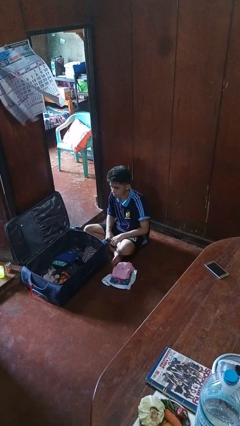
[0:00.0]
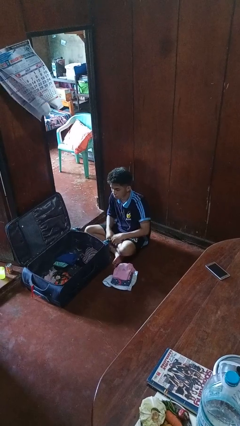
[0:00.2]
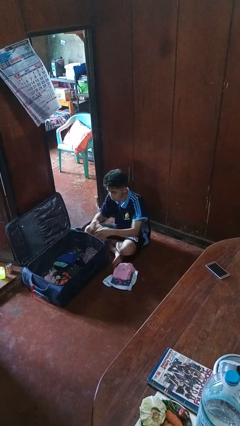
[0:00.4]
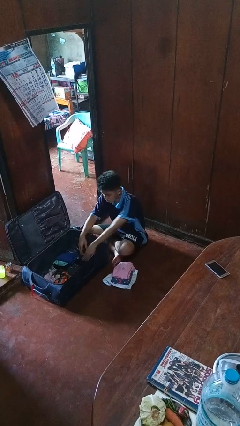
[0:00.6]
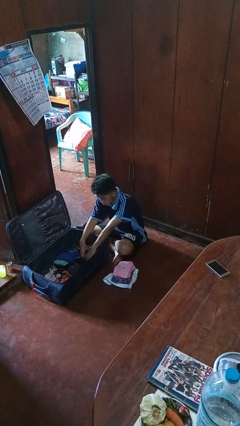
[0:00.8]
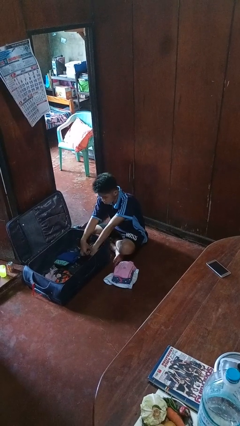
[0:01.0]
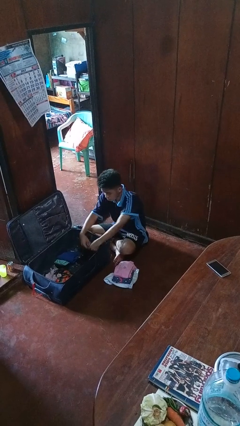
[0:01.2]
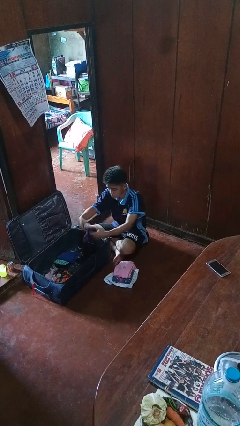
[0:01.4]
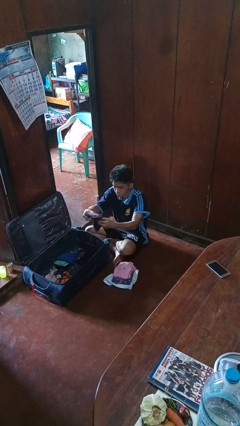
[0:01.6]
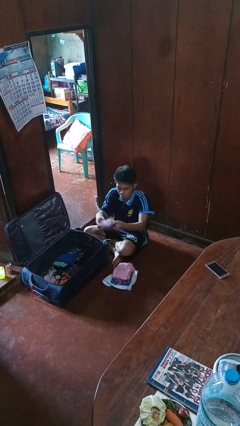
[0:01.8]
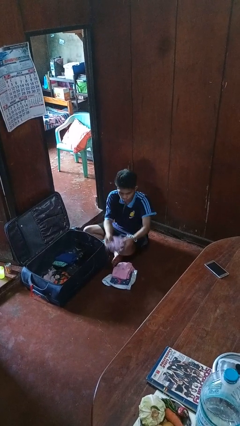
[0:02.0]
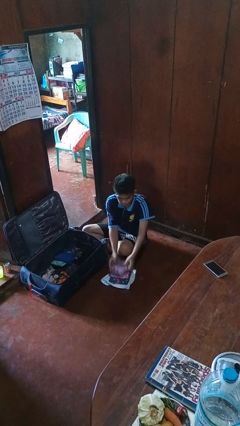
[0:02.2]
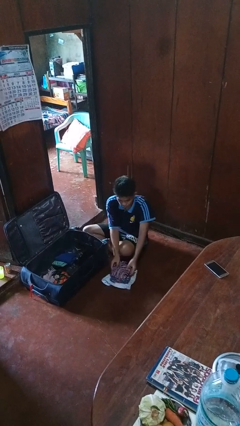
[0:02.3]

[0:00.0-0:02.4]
person unloads clothes from suitcase

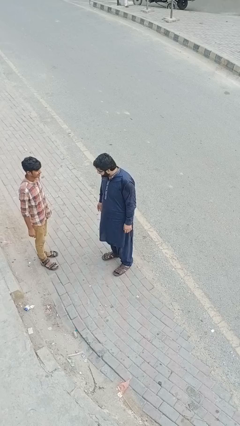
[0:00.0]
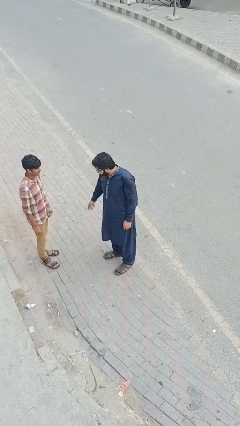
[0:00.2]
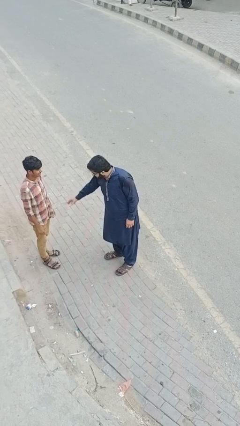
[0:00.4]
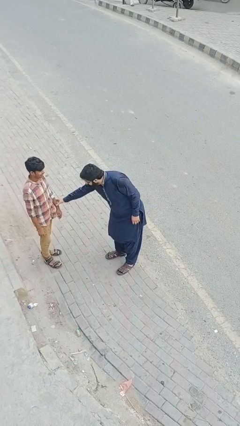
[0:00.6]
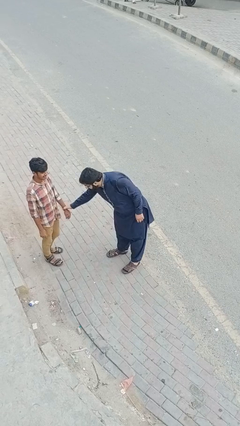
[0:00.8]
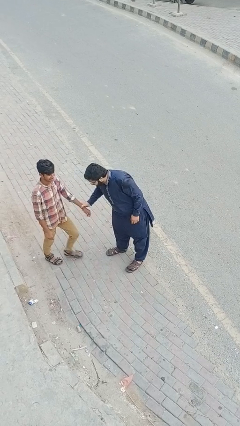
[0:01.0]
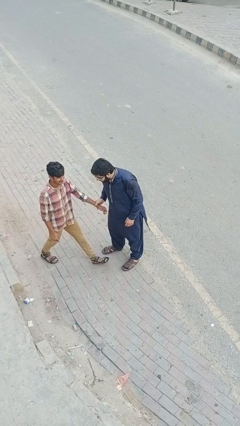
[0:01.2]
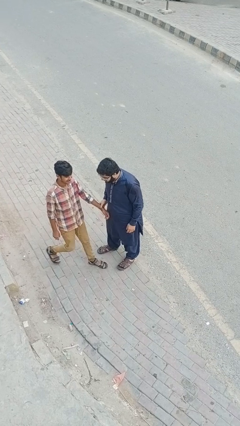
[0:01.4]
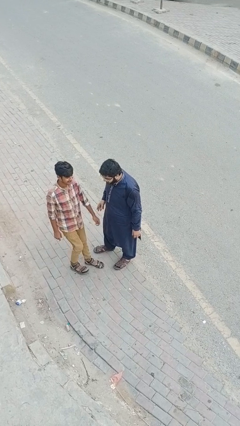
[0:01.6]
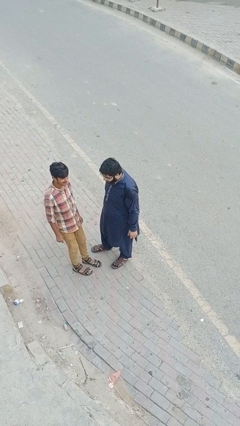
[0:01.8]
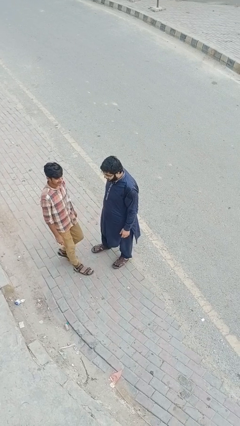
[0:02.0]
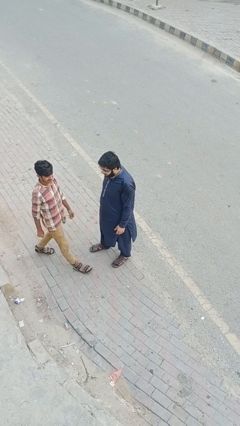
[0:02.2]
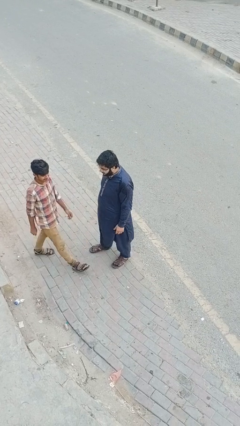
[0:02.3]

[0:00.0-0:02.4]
person grabs person by forearm

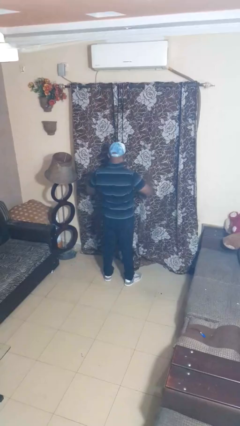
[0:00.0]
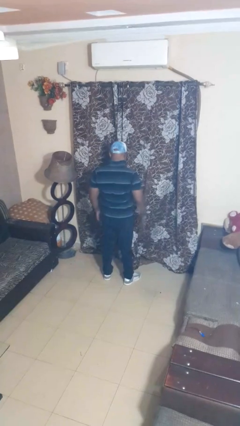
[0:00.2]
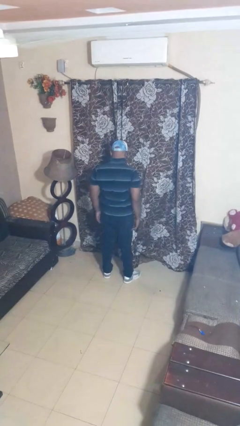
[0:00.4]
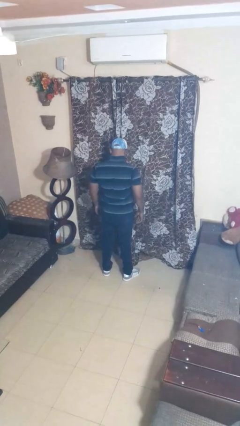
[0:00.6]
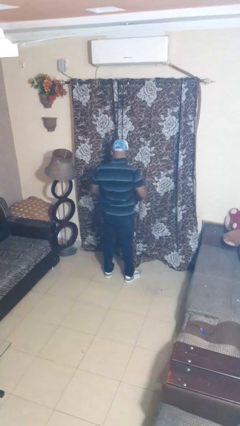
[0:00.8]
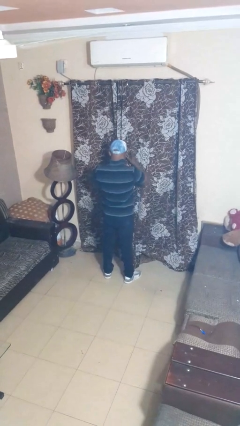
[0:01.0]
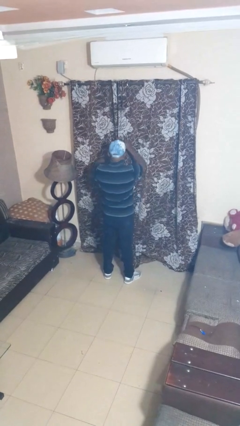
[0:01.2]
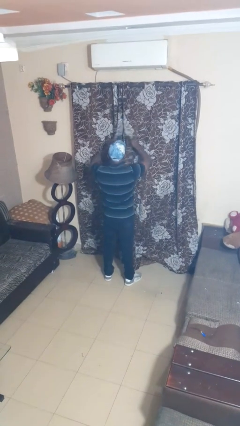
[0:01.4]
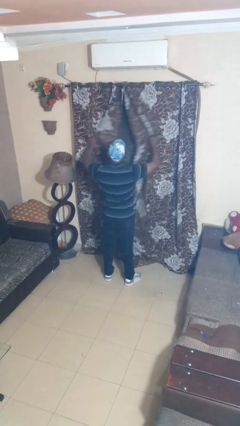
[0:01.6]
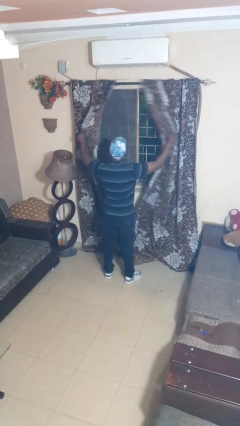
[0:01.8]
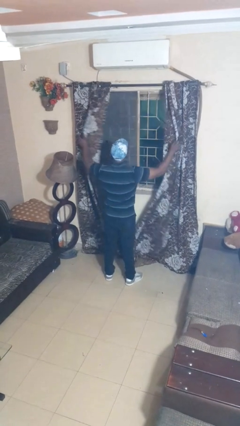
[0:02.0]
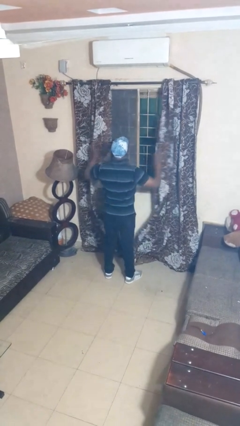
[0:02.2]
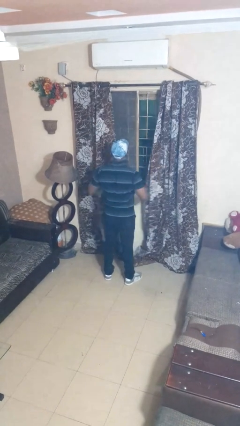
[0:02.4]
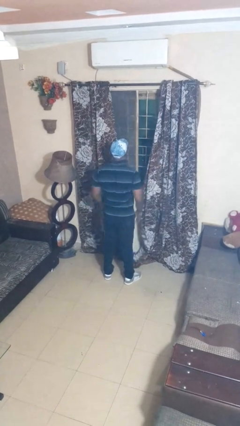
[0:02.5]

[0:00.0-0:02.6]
person opens curtains

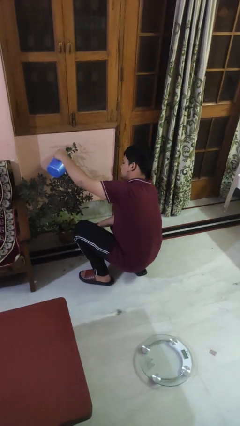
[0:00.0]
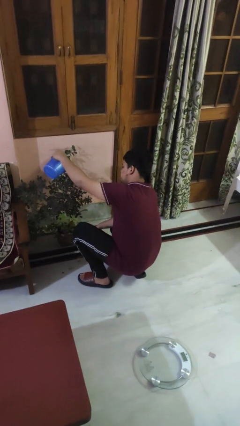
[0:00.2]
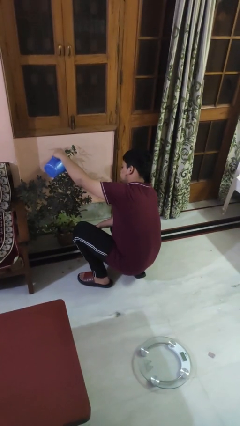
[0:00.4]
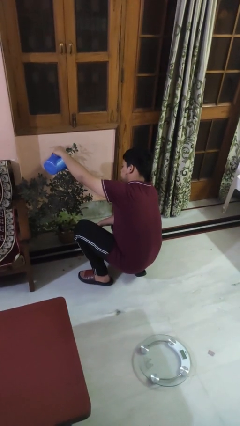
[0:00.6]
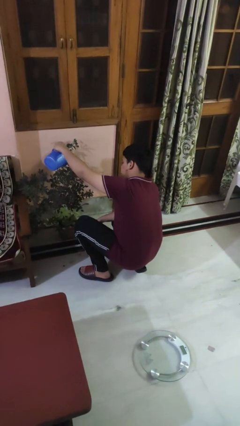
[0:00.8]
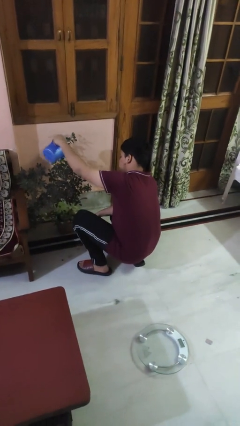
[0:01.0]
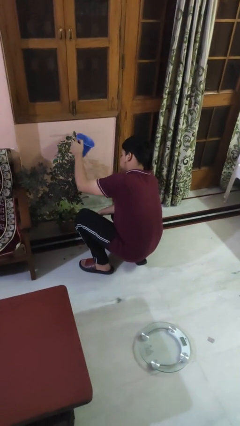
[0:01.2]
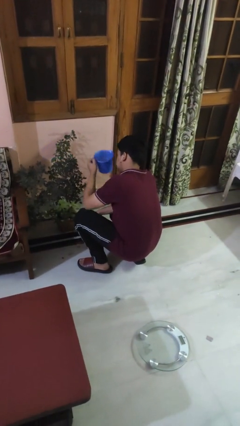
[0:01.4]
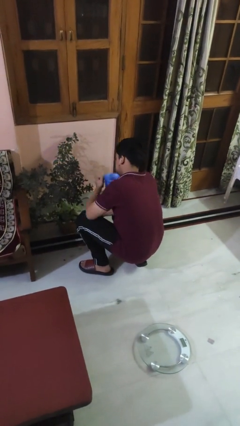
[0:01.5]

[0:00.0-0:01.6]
person waters houseplant

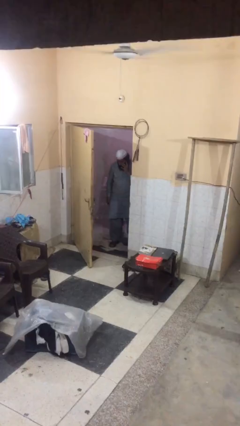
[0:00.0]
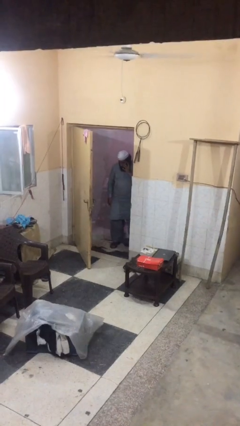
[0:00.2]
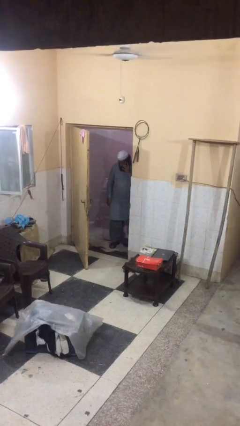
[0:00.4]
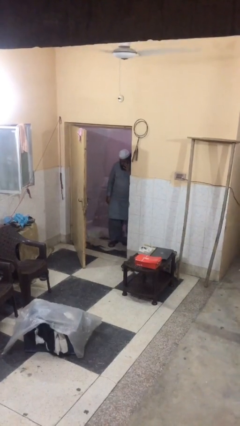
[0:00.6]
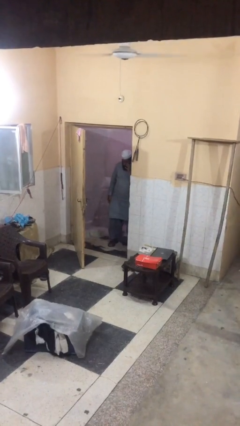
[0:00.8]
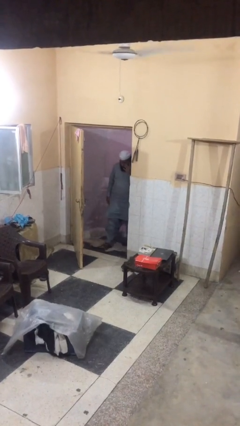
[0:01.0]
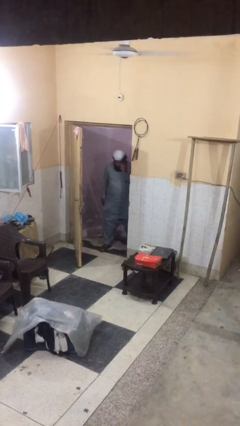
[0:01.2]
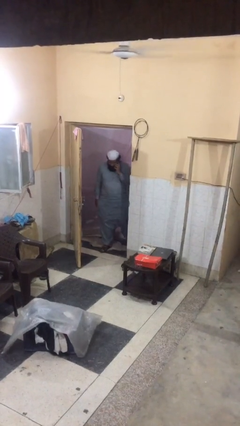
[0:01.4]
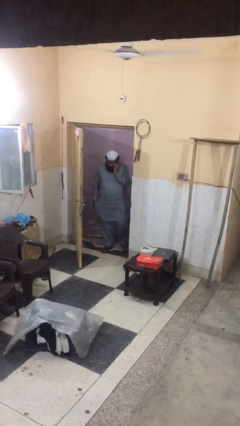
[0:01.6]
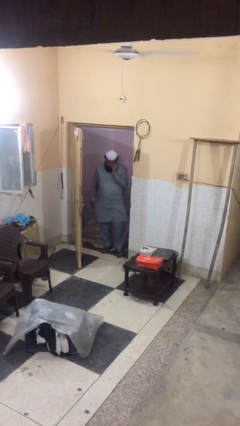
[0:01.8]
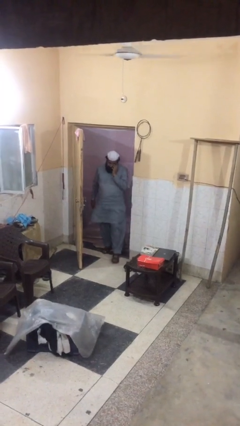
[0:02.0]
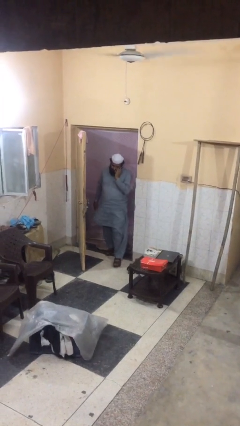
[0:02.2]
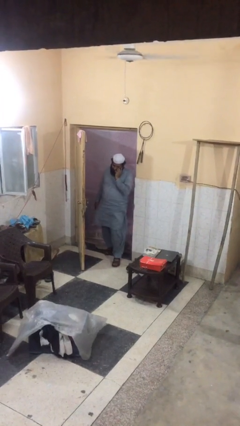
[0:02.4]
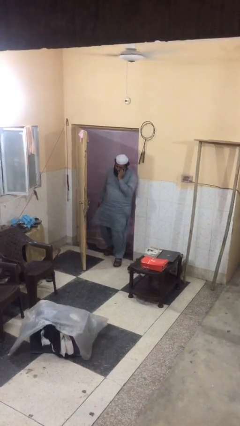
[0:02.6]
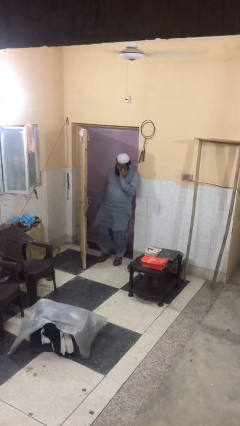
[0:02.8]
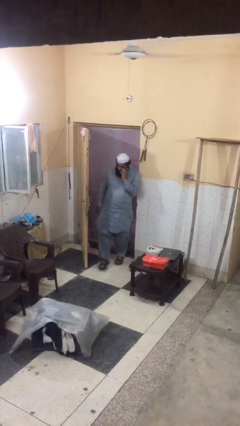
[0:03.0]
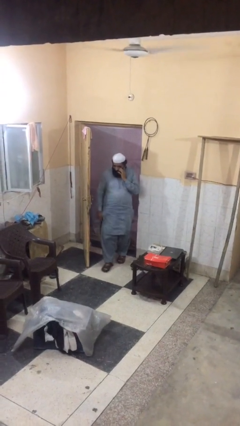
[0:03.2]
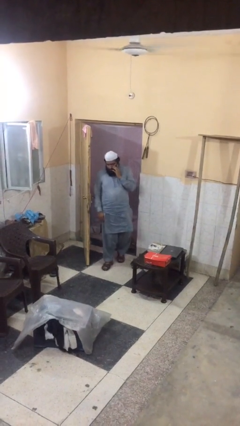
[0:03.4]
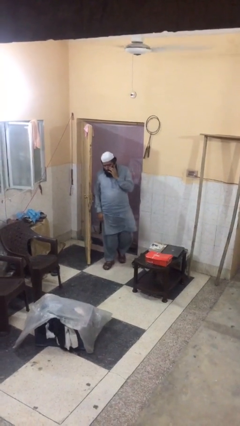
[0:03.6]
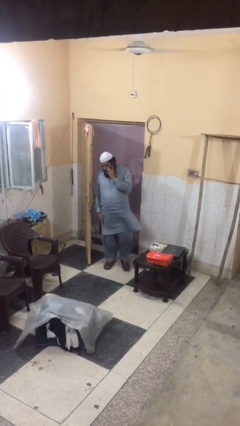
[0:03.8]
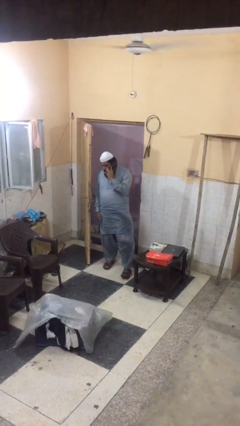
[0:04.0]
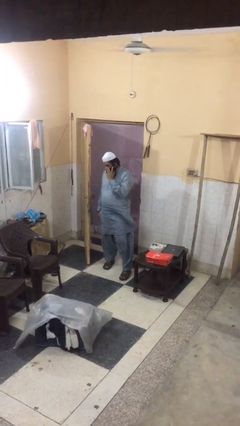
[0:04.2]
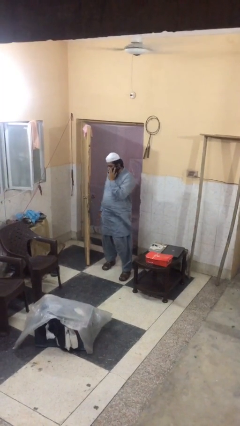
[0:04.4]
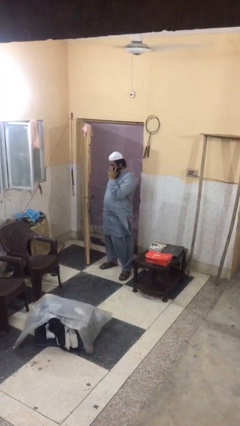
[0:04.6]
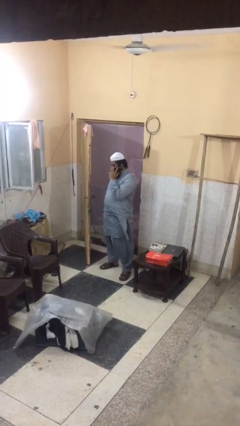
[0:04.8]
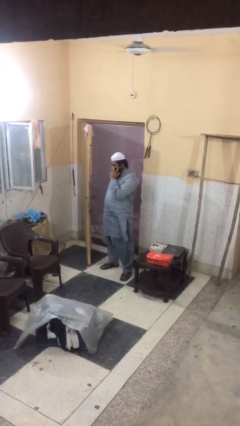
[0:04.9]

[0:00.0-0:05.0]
person enters scene through structure

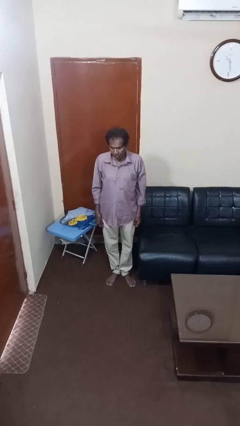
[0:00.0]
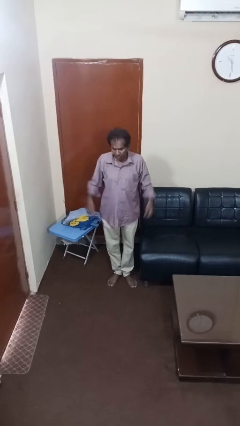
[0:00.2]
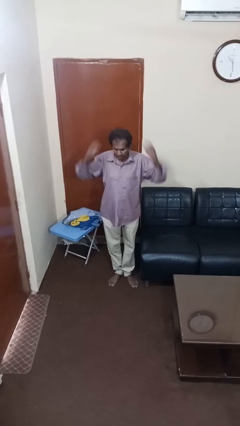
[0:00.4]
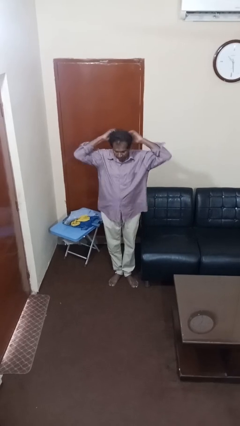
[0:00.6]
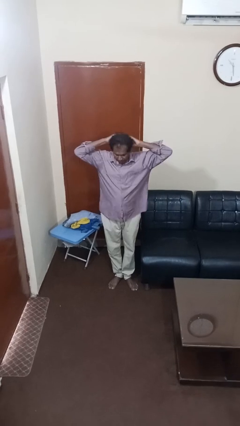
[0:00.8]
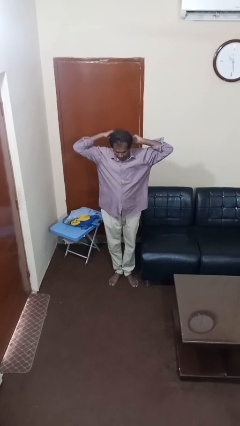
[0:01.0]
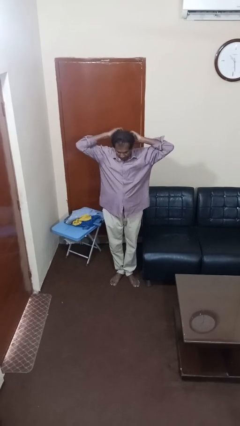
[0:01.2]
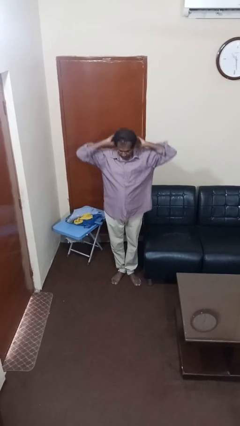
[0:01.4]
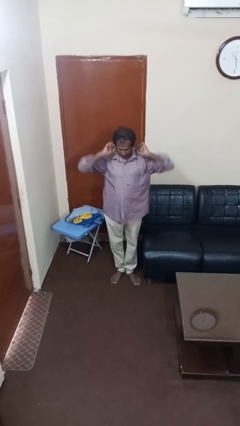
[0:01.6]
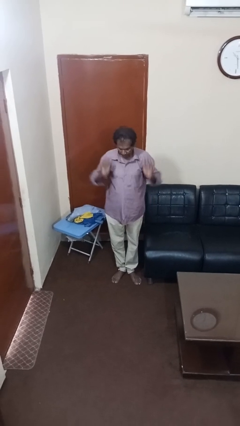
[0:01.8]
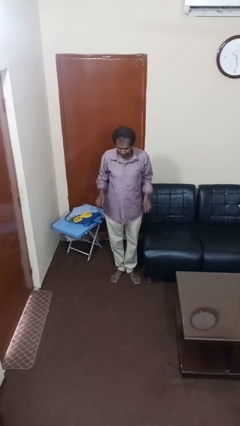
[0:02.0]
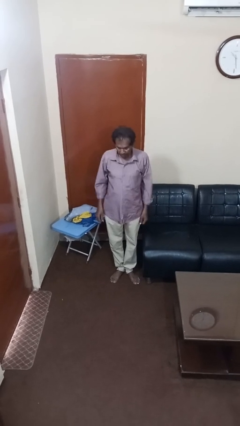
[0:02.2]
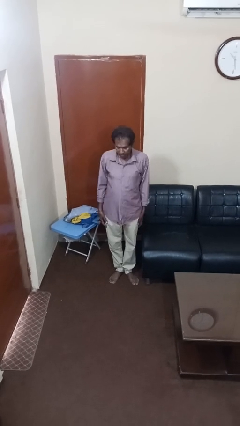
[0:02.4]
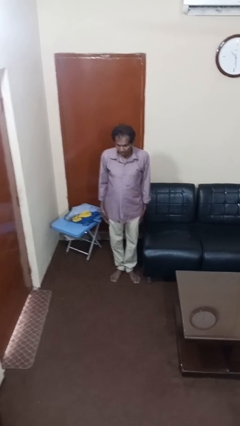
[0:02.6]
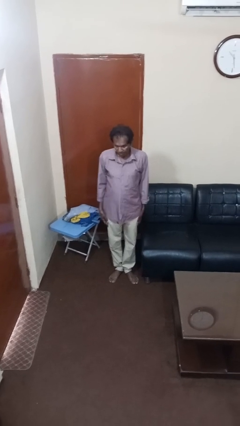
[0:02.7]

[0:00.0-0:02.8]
person takes off hairtie

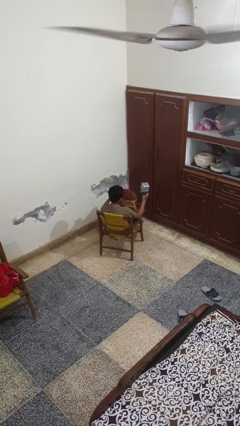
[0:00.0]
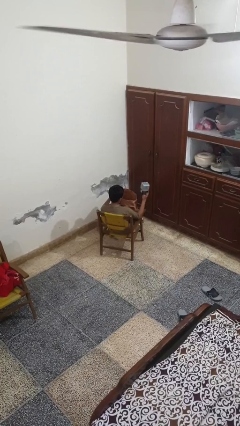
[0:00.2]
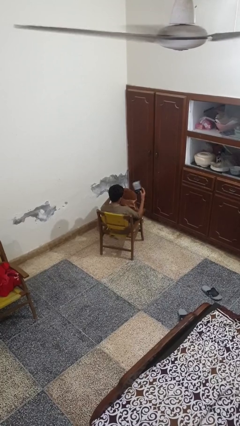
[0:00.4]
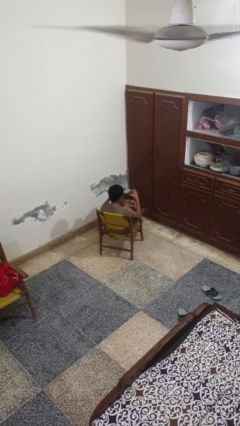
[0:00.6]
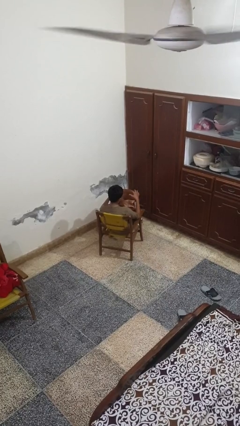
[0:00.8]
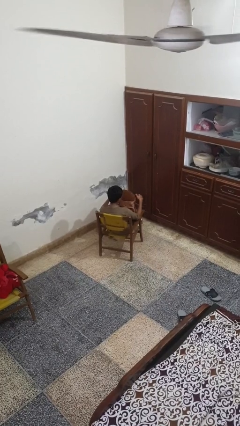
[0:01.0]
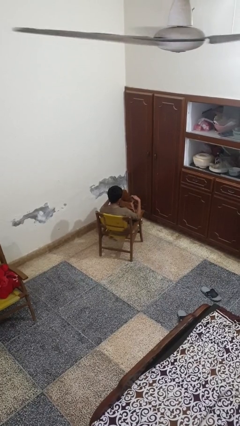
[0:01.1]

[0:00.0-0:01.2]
person puts object into bag
